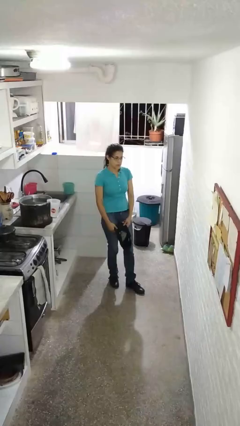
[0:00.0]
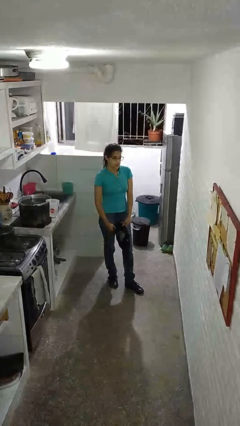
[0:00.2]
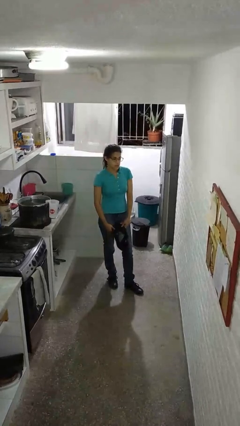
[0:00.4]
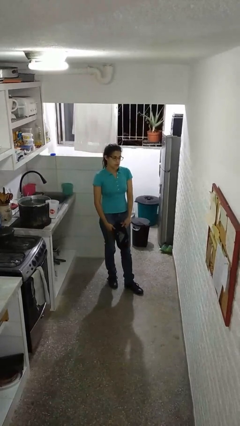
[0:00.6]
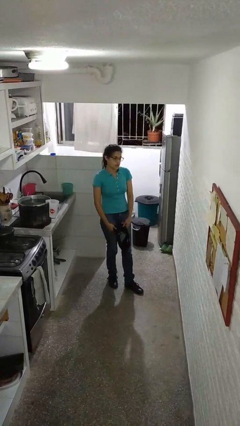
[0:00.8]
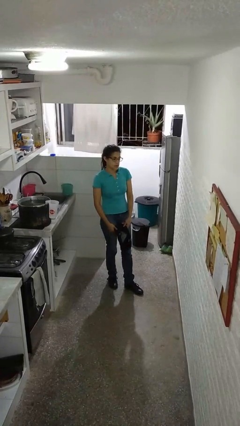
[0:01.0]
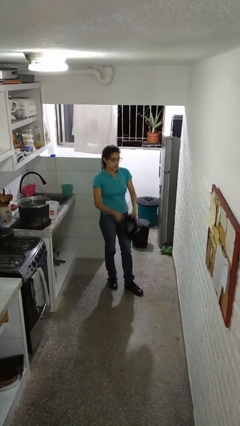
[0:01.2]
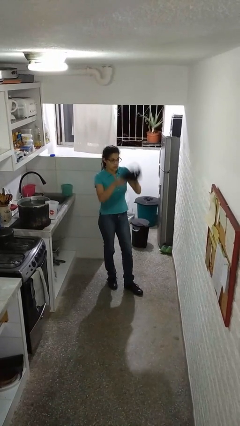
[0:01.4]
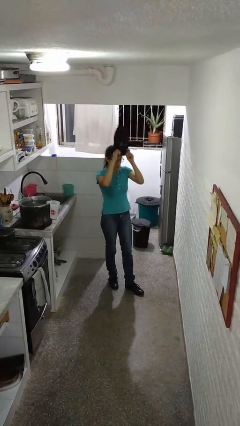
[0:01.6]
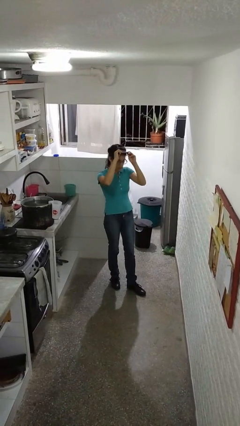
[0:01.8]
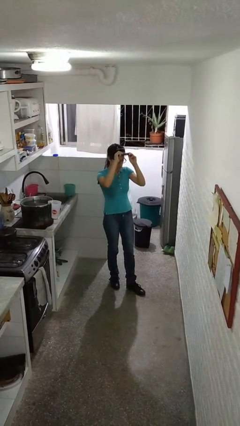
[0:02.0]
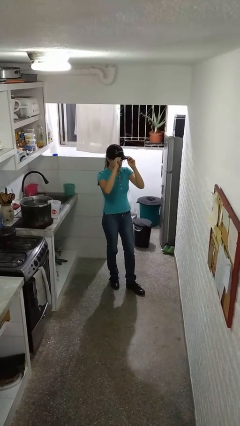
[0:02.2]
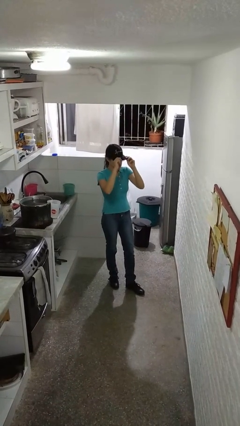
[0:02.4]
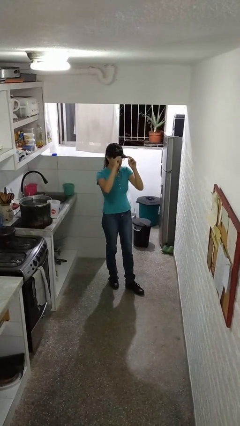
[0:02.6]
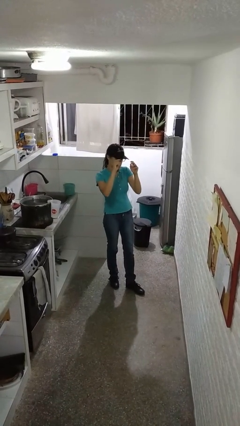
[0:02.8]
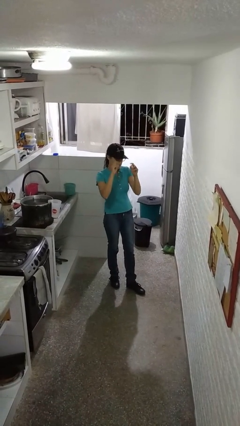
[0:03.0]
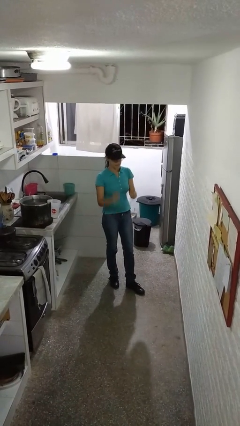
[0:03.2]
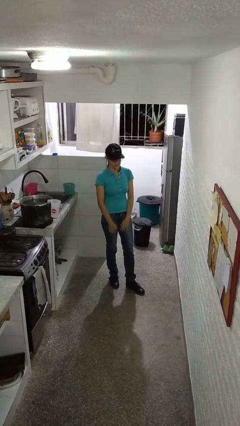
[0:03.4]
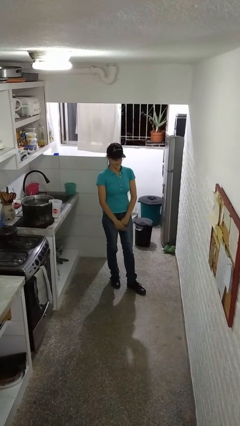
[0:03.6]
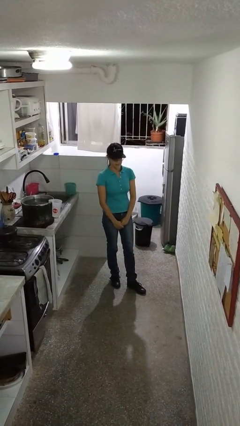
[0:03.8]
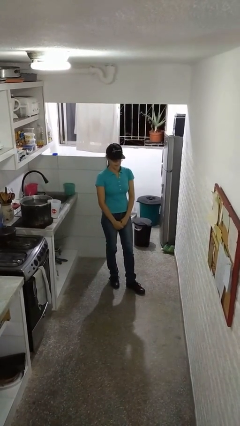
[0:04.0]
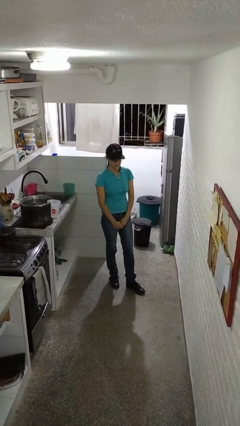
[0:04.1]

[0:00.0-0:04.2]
person puts on hat

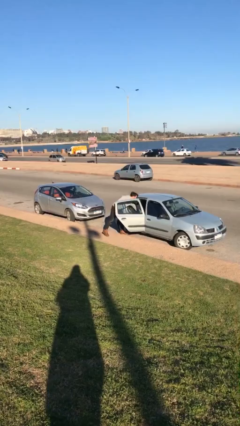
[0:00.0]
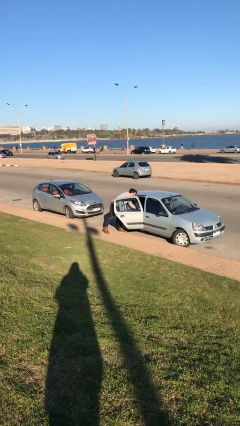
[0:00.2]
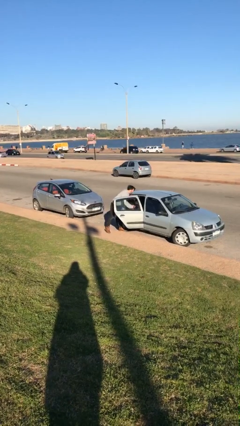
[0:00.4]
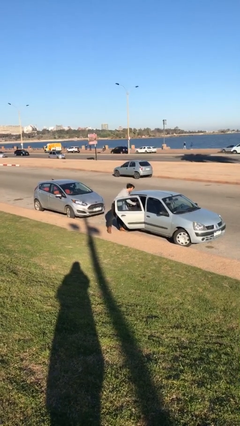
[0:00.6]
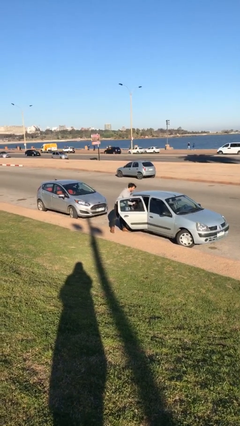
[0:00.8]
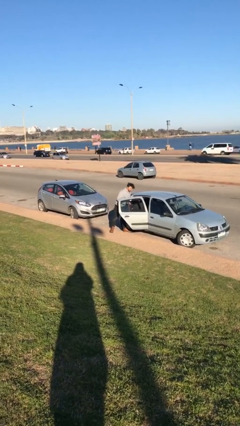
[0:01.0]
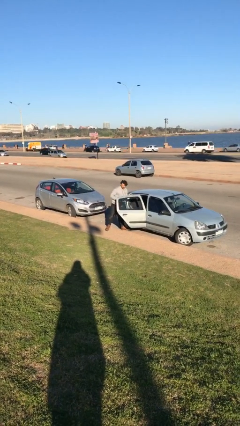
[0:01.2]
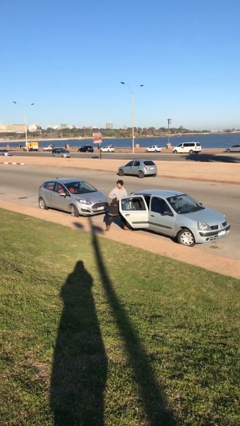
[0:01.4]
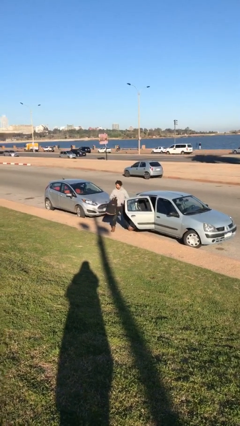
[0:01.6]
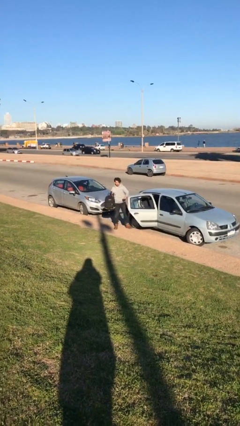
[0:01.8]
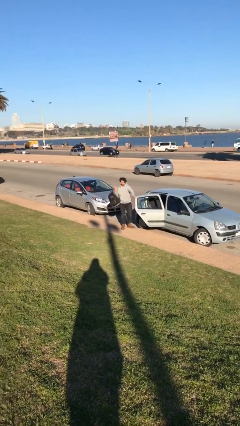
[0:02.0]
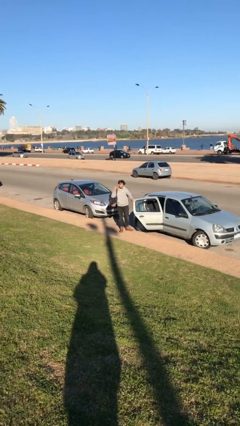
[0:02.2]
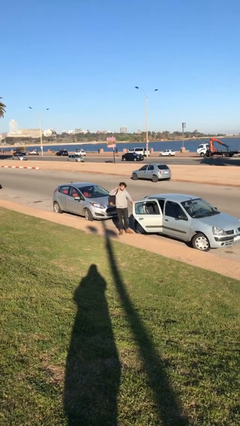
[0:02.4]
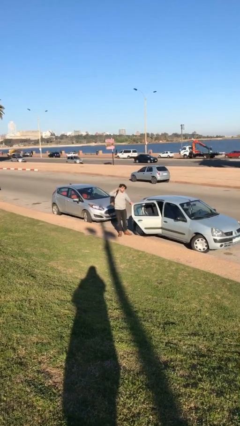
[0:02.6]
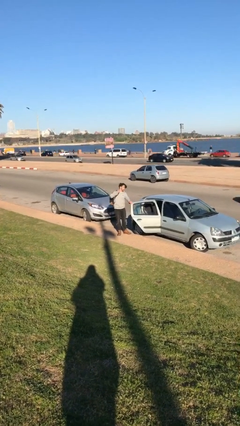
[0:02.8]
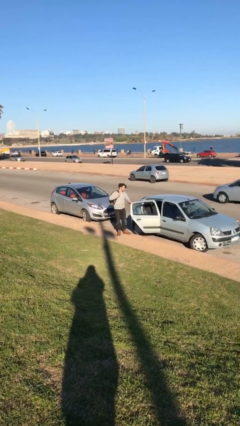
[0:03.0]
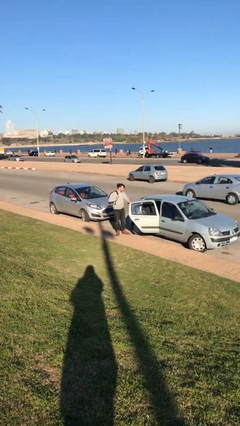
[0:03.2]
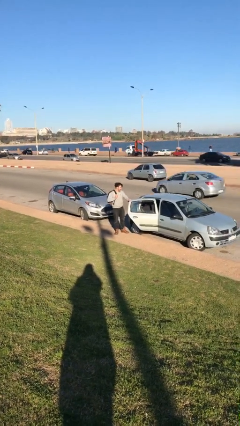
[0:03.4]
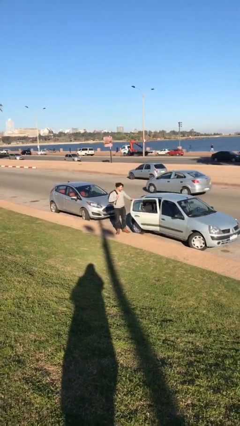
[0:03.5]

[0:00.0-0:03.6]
person unloads car

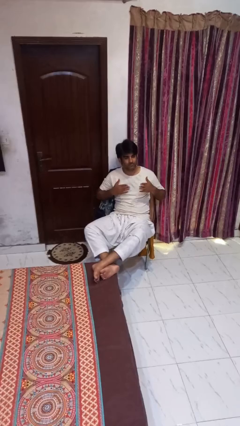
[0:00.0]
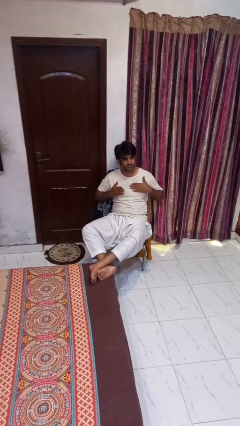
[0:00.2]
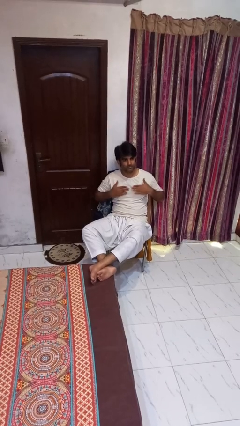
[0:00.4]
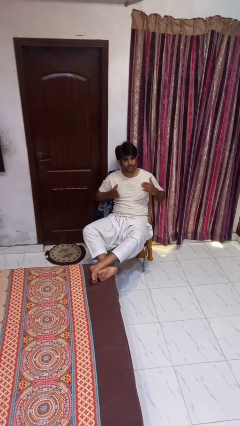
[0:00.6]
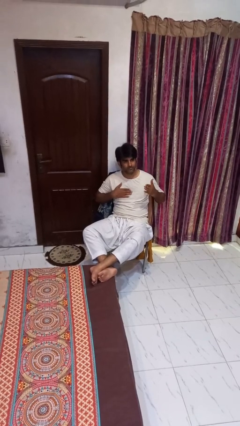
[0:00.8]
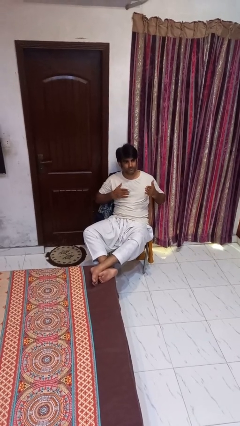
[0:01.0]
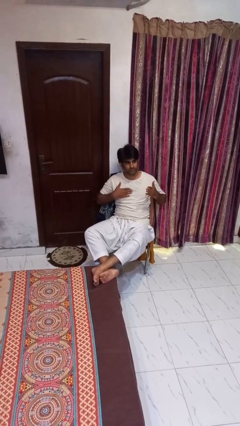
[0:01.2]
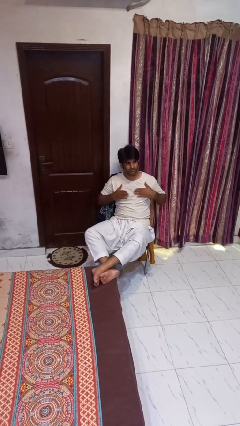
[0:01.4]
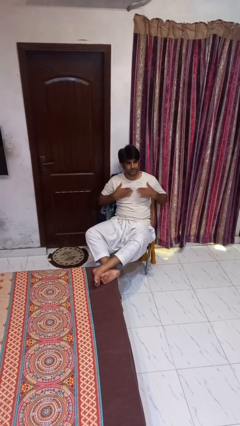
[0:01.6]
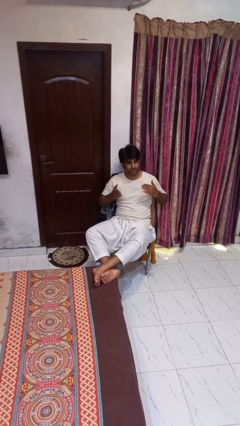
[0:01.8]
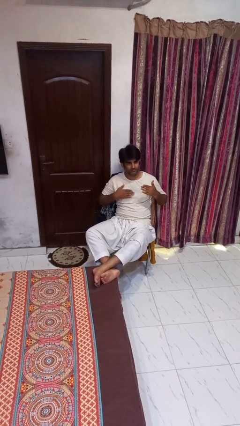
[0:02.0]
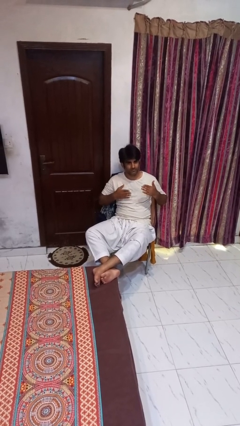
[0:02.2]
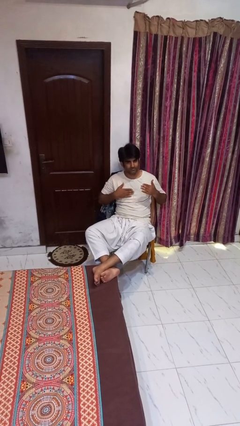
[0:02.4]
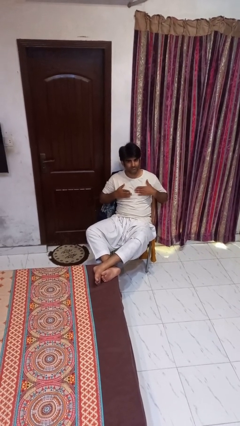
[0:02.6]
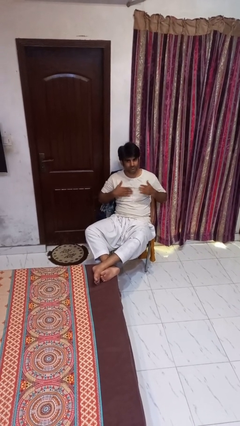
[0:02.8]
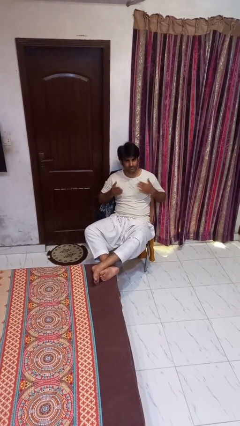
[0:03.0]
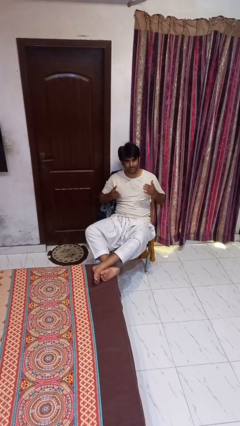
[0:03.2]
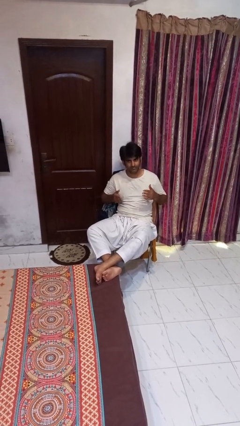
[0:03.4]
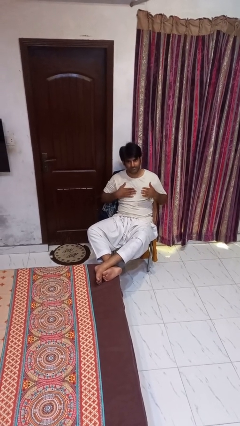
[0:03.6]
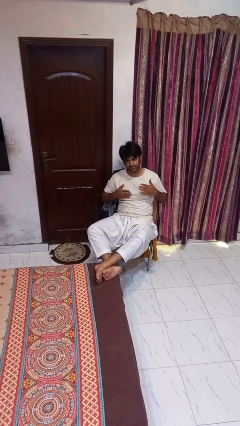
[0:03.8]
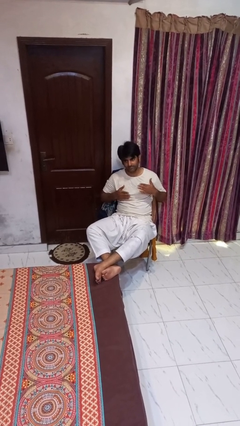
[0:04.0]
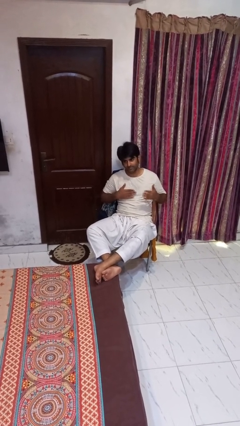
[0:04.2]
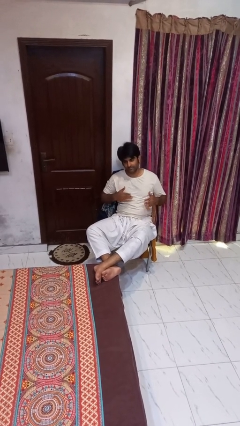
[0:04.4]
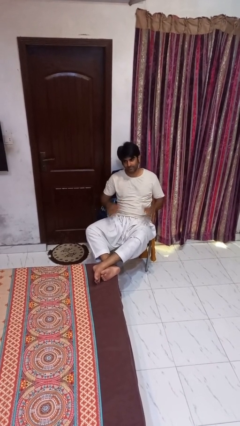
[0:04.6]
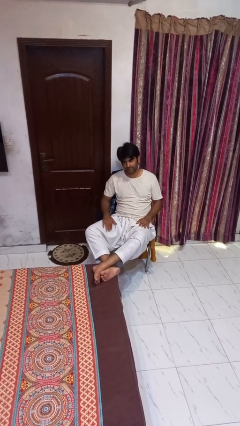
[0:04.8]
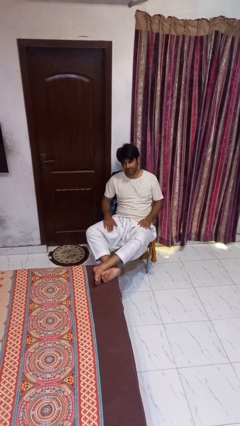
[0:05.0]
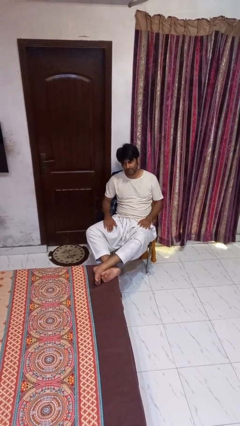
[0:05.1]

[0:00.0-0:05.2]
person drums on chest

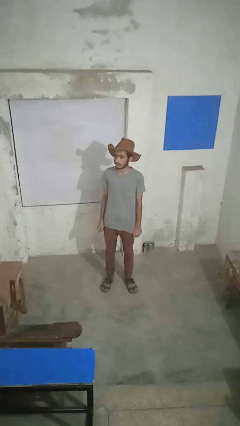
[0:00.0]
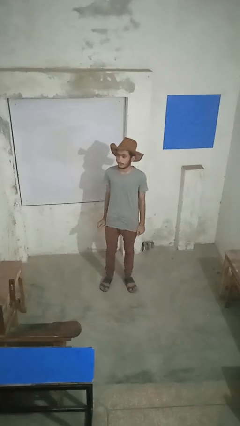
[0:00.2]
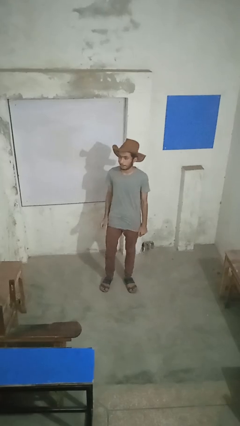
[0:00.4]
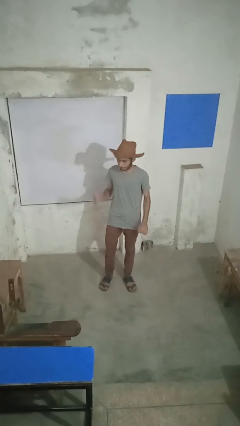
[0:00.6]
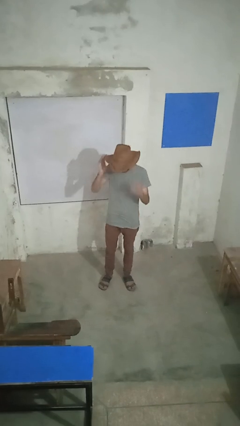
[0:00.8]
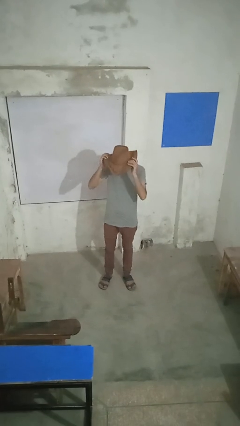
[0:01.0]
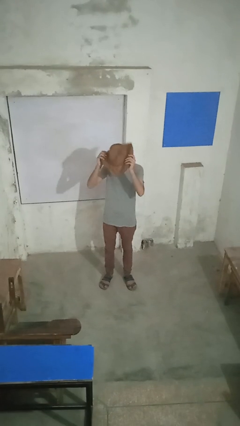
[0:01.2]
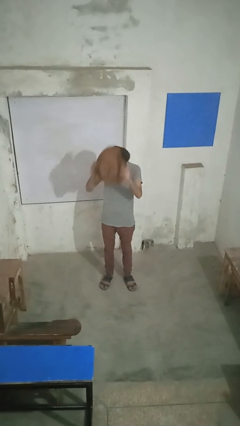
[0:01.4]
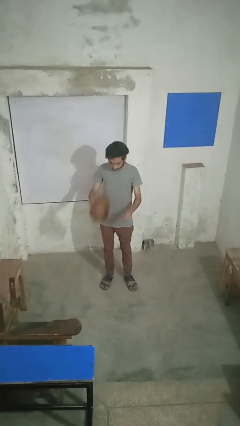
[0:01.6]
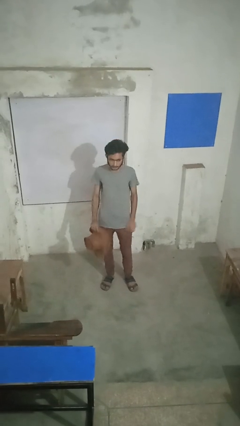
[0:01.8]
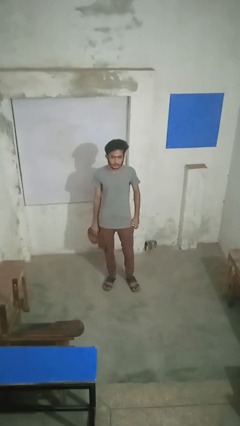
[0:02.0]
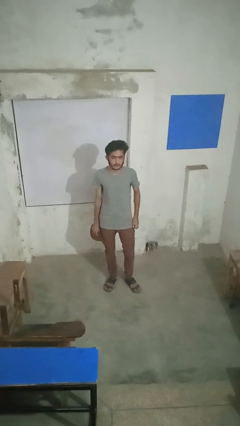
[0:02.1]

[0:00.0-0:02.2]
person takes off hat

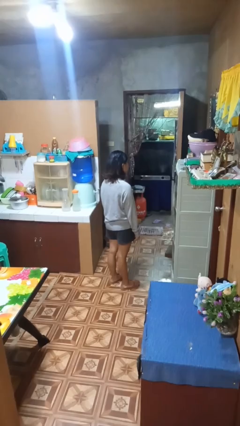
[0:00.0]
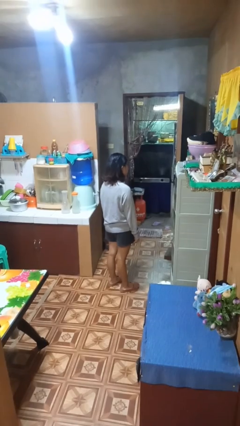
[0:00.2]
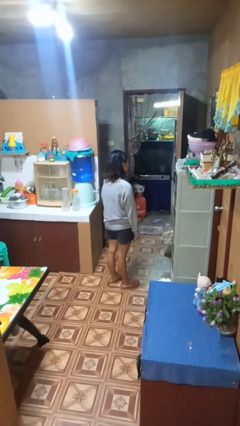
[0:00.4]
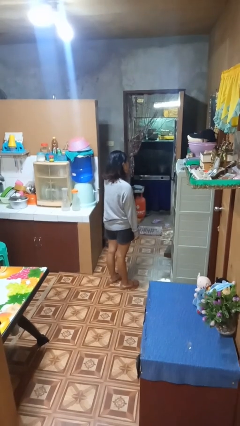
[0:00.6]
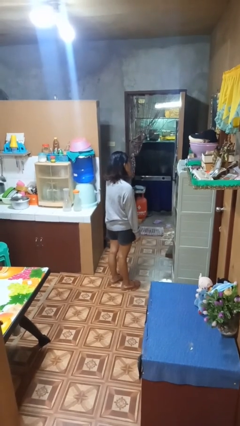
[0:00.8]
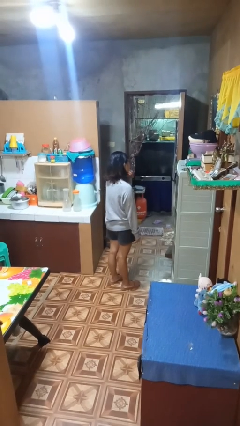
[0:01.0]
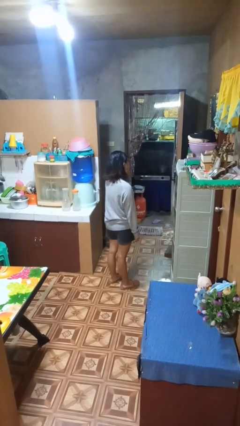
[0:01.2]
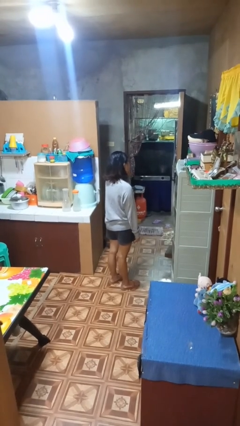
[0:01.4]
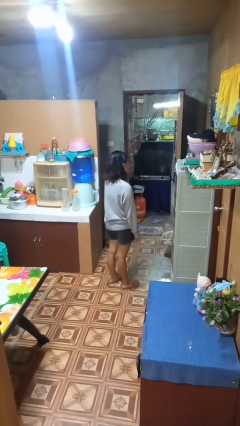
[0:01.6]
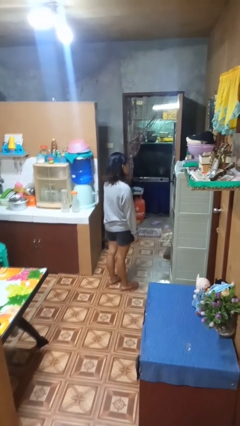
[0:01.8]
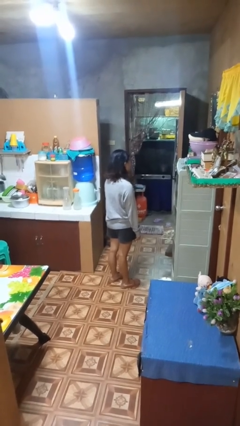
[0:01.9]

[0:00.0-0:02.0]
person strokes chin

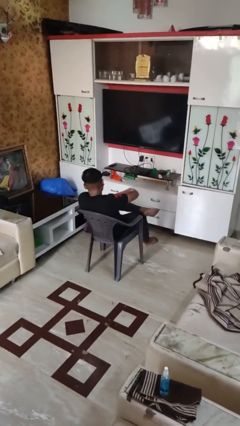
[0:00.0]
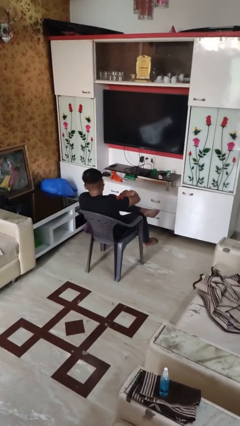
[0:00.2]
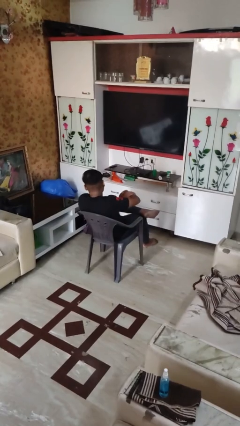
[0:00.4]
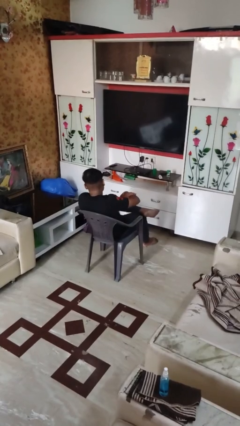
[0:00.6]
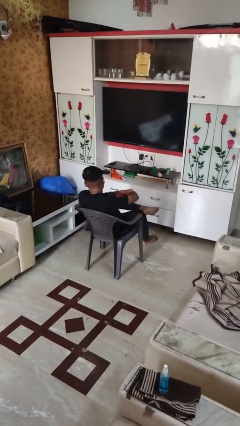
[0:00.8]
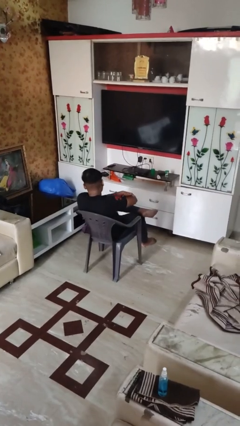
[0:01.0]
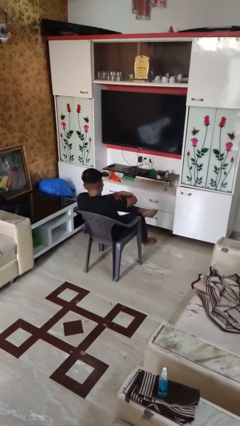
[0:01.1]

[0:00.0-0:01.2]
person swats bug
